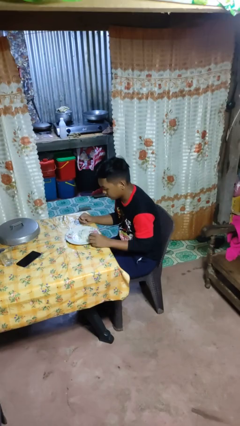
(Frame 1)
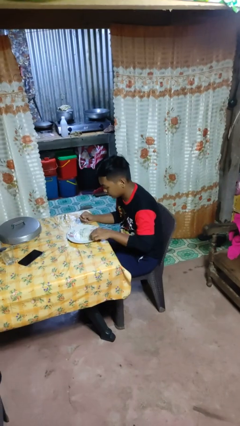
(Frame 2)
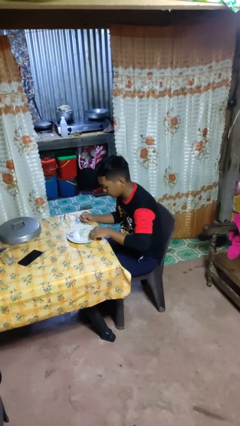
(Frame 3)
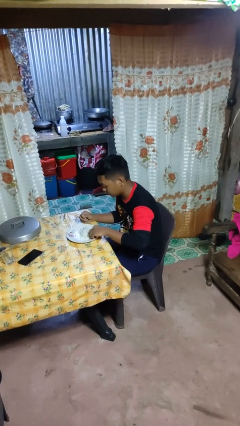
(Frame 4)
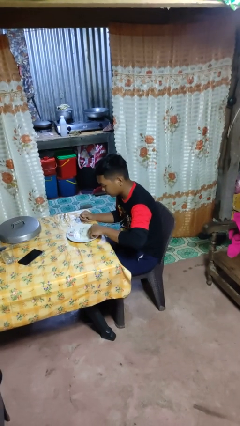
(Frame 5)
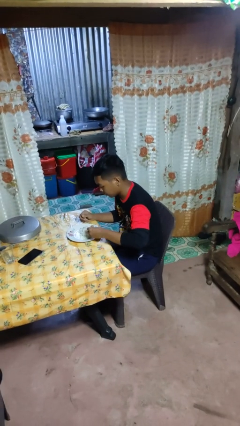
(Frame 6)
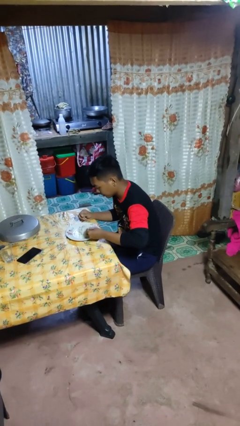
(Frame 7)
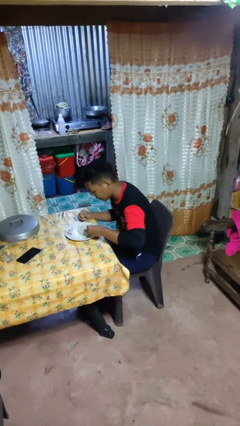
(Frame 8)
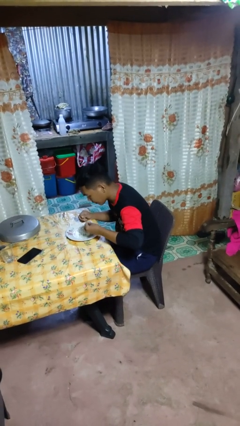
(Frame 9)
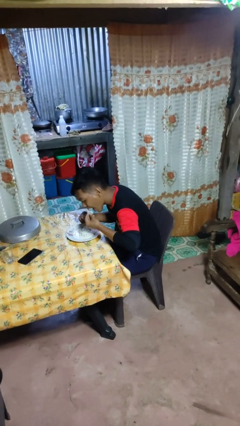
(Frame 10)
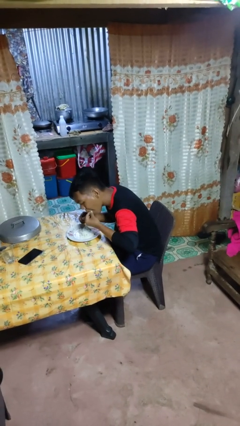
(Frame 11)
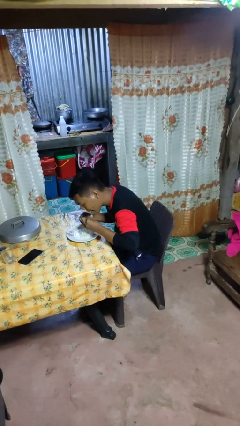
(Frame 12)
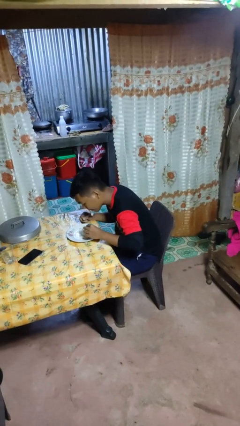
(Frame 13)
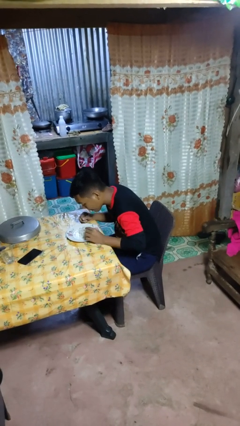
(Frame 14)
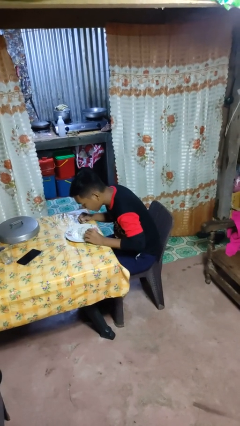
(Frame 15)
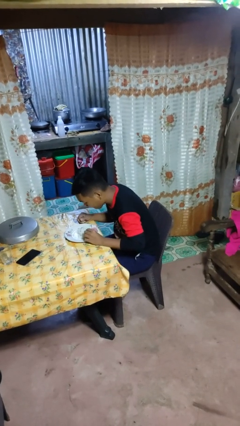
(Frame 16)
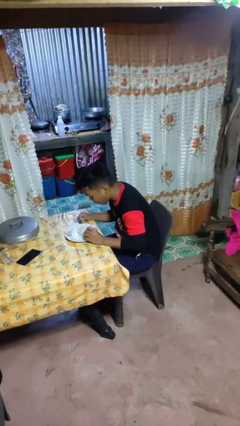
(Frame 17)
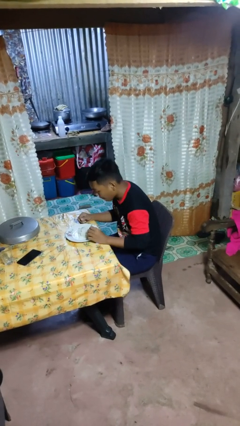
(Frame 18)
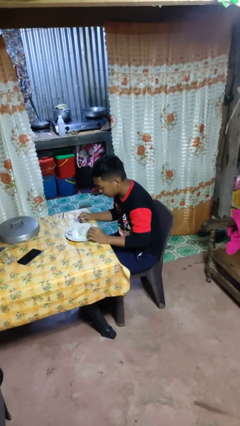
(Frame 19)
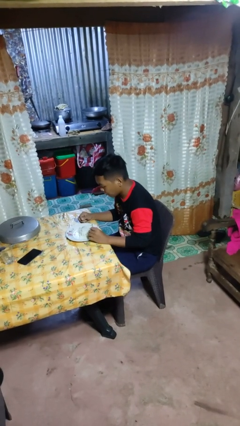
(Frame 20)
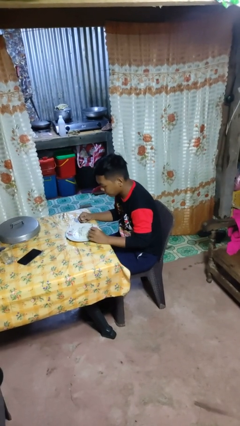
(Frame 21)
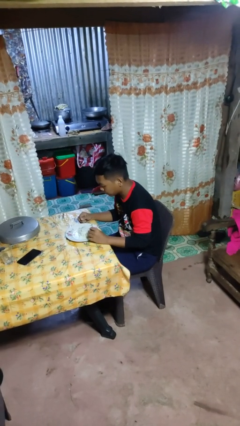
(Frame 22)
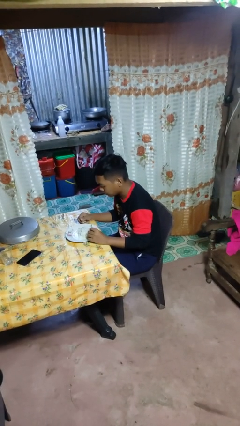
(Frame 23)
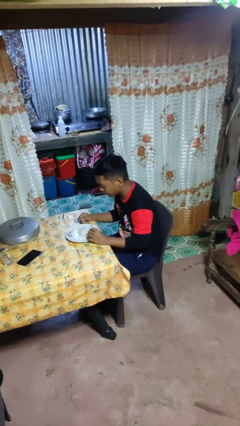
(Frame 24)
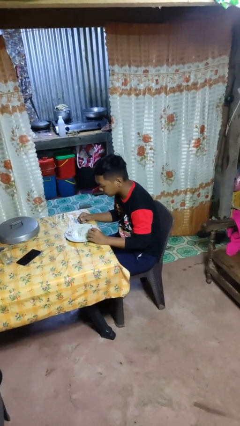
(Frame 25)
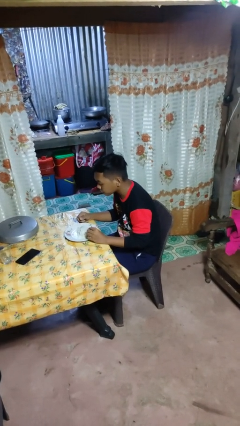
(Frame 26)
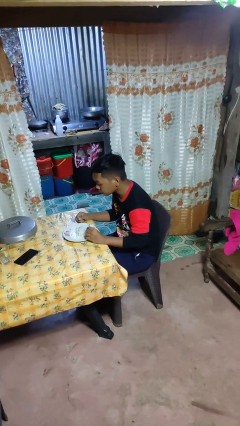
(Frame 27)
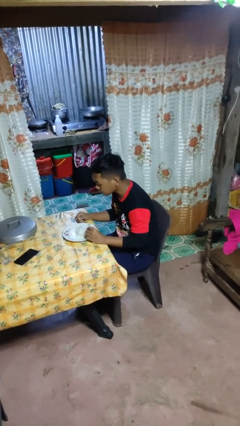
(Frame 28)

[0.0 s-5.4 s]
person eats with hands

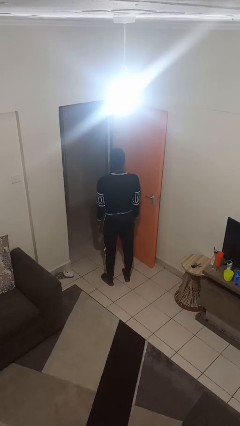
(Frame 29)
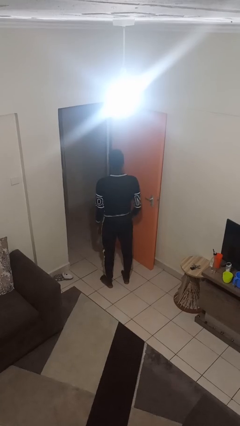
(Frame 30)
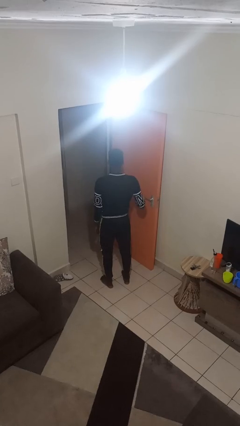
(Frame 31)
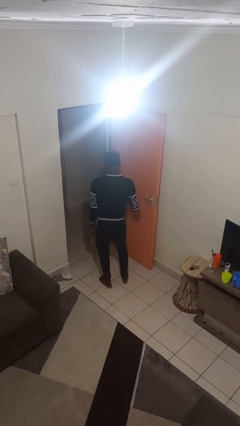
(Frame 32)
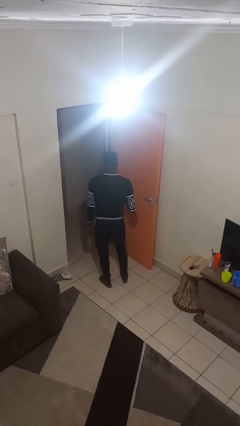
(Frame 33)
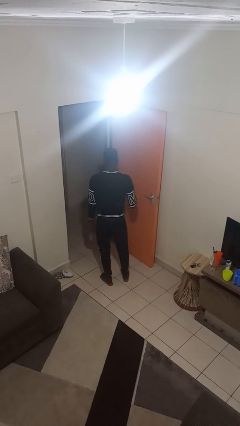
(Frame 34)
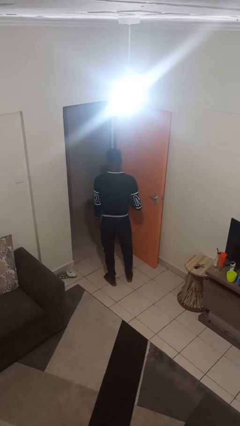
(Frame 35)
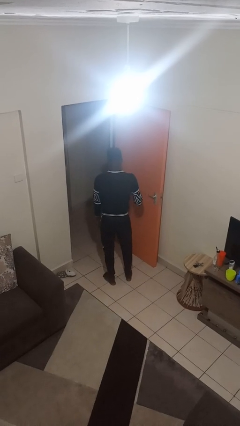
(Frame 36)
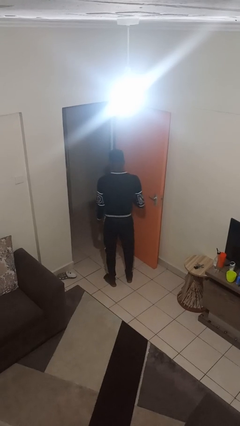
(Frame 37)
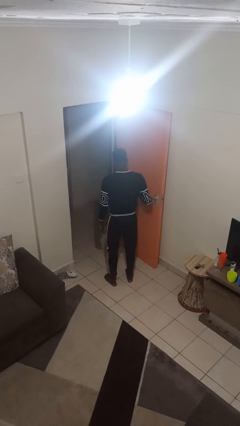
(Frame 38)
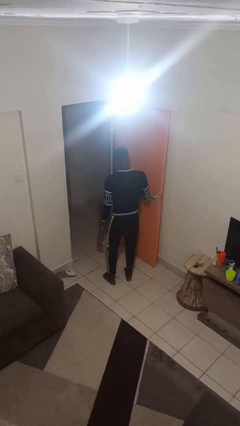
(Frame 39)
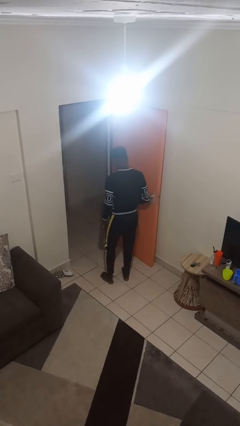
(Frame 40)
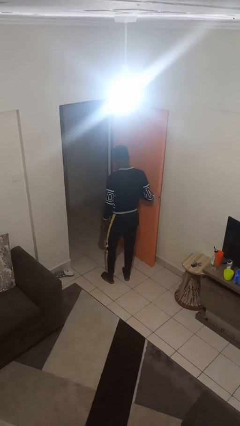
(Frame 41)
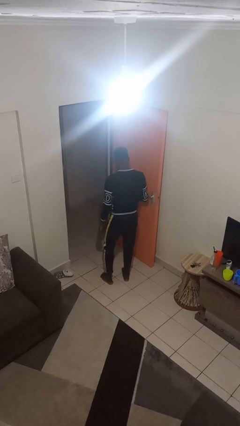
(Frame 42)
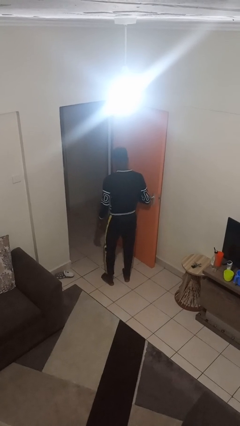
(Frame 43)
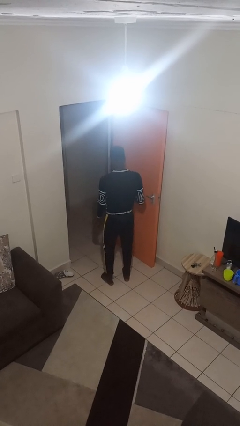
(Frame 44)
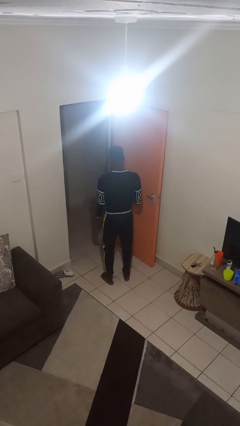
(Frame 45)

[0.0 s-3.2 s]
person snaps fingers

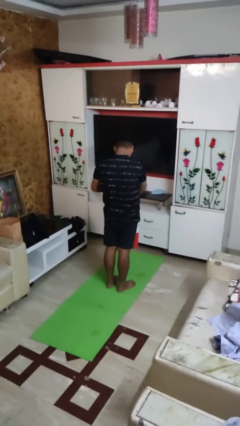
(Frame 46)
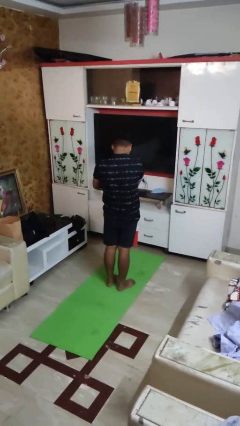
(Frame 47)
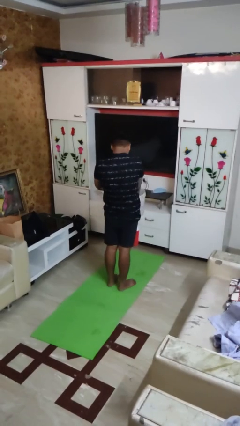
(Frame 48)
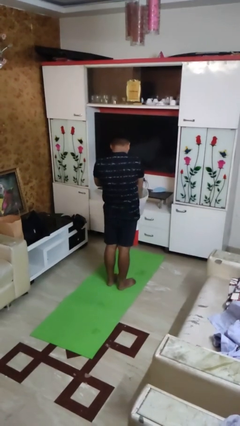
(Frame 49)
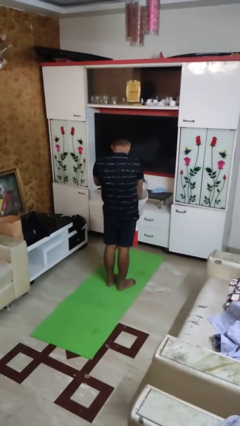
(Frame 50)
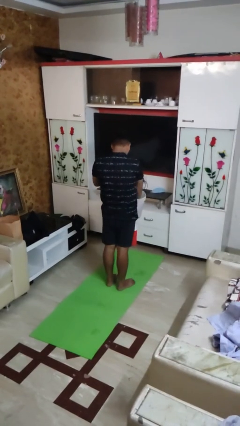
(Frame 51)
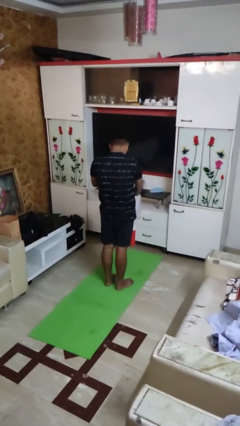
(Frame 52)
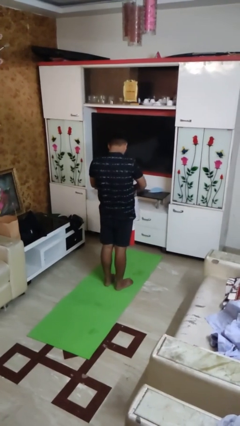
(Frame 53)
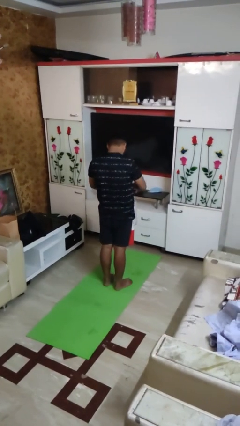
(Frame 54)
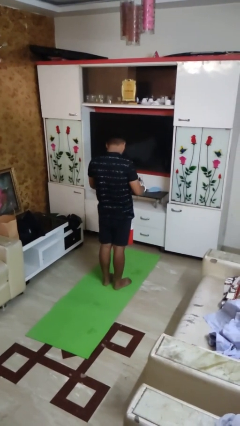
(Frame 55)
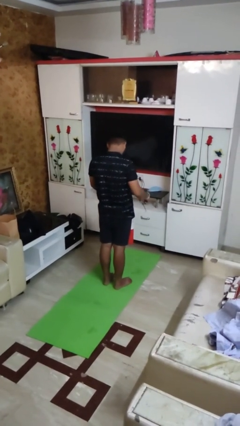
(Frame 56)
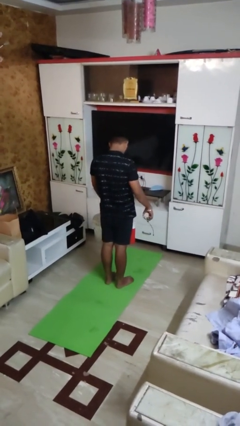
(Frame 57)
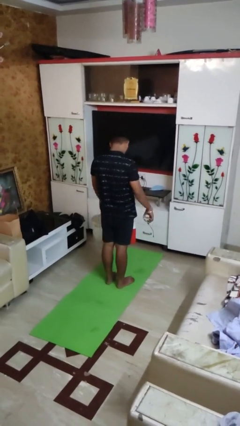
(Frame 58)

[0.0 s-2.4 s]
person takes object from basket

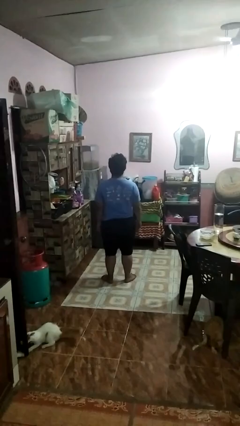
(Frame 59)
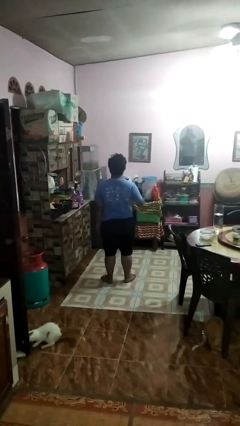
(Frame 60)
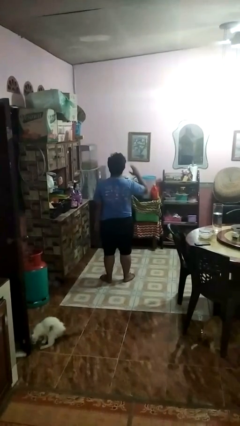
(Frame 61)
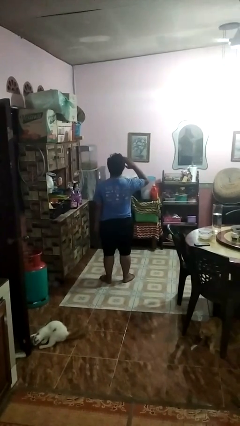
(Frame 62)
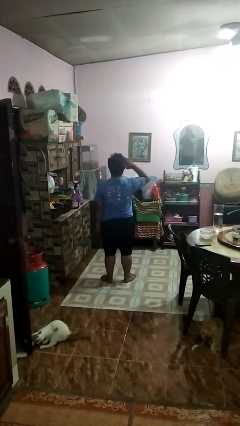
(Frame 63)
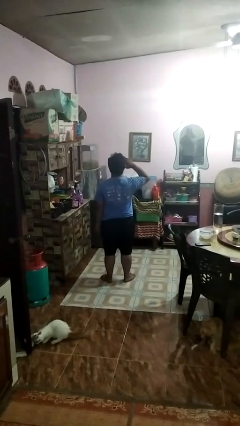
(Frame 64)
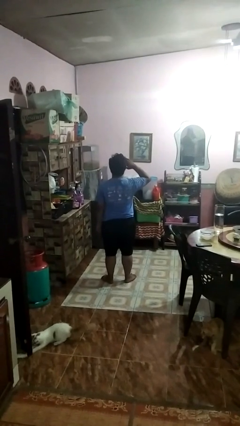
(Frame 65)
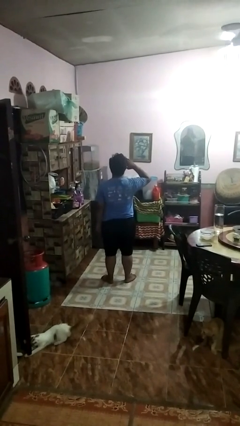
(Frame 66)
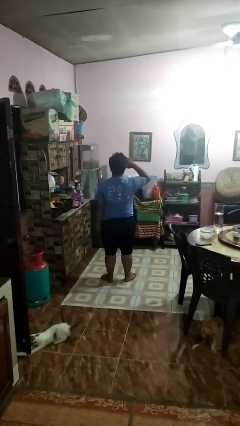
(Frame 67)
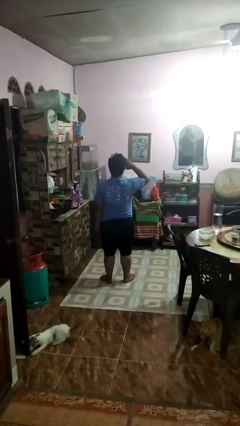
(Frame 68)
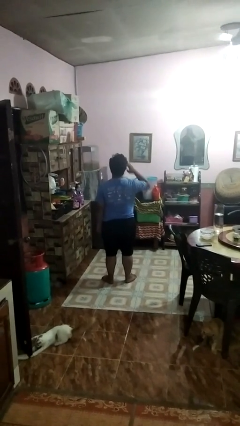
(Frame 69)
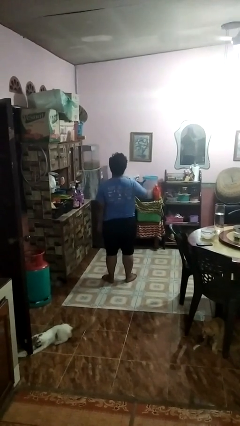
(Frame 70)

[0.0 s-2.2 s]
person salutes

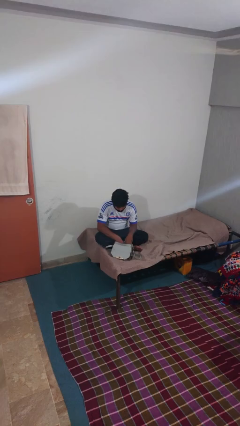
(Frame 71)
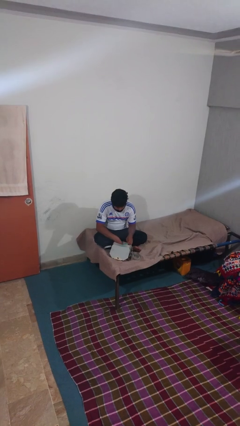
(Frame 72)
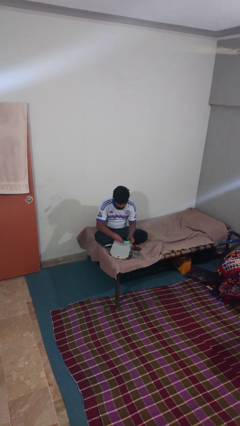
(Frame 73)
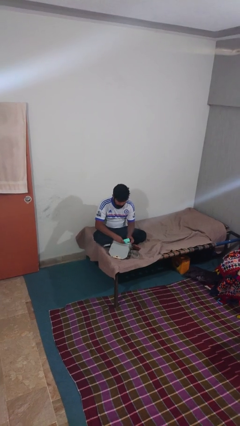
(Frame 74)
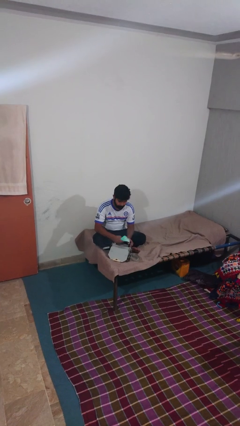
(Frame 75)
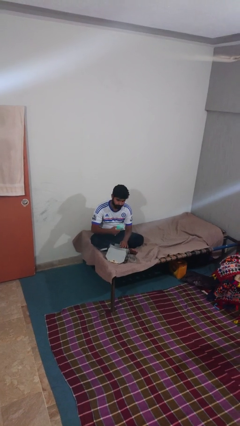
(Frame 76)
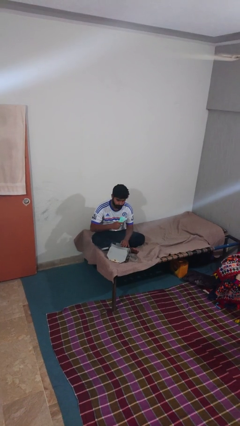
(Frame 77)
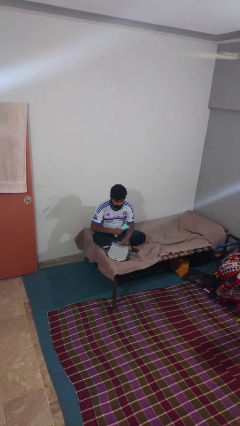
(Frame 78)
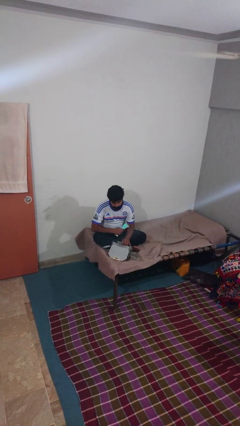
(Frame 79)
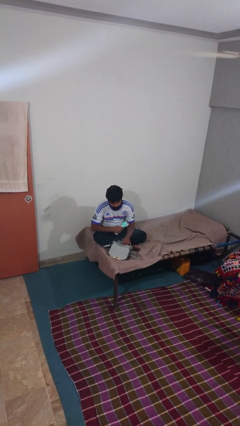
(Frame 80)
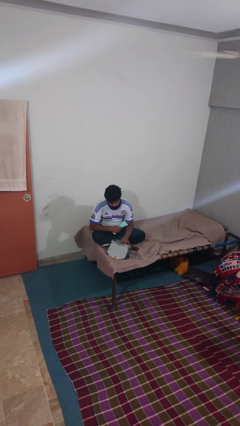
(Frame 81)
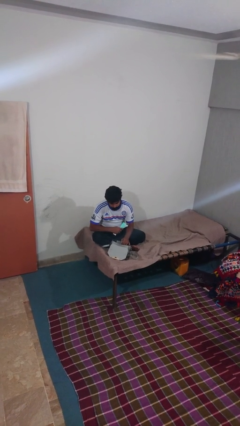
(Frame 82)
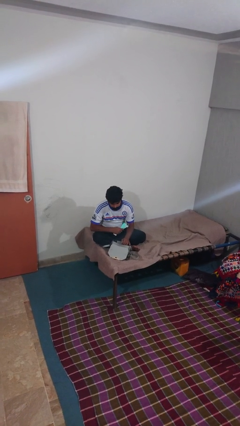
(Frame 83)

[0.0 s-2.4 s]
person takes object from purse

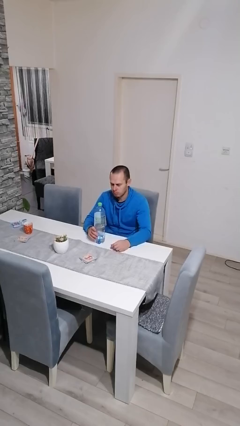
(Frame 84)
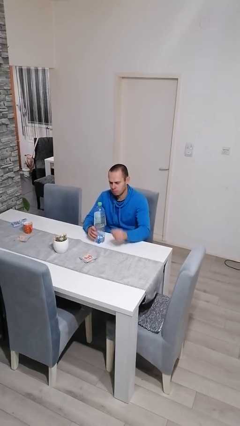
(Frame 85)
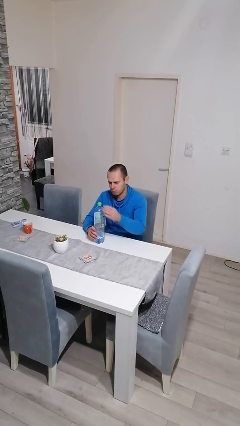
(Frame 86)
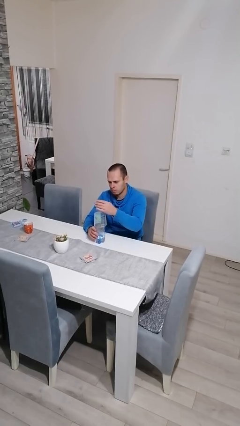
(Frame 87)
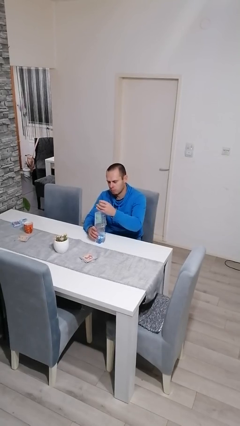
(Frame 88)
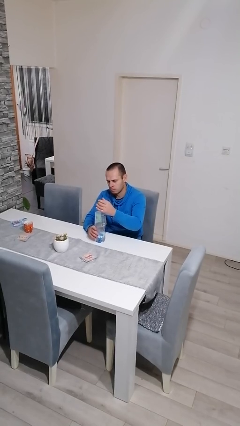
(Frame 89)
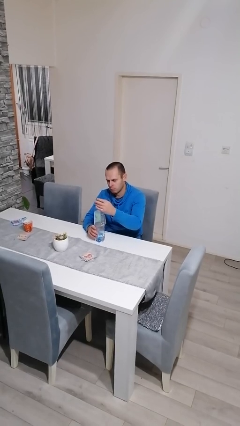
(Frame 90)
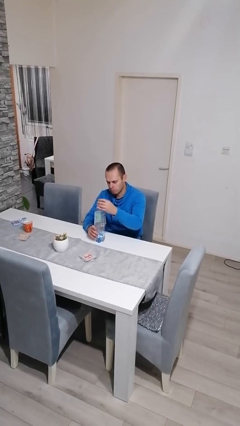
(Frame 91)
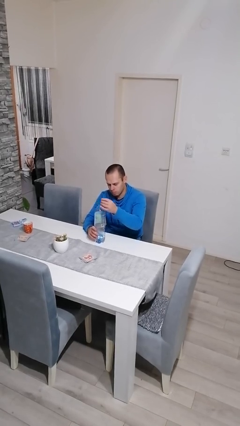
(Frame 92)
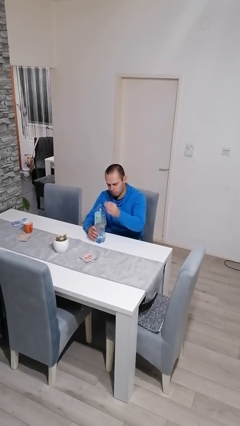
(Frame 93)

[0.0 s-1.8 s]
person unscrews lid from bottle
